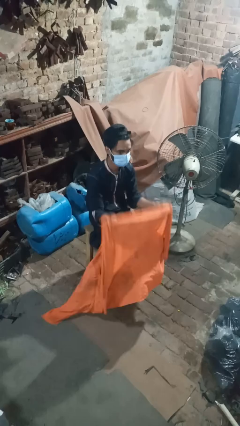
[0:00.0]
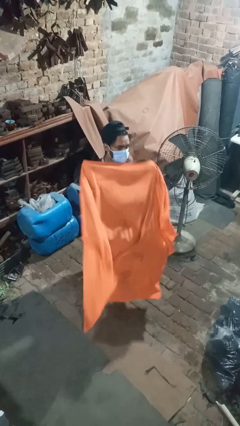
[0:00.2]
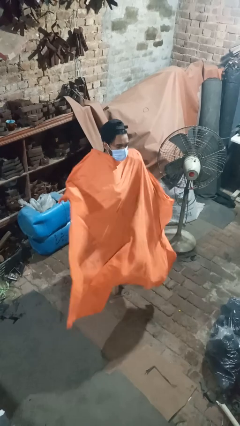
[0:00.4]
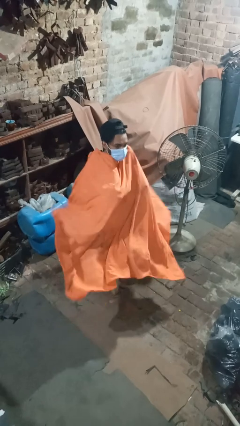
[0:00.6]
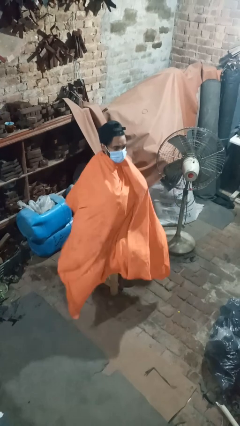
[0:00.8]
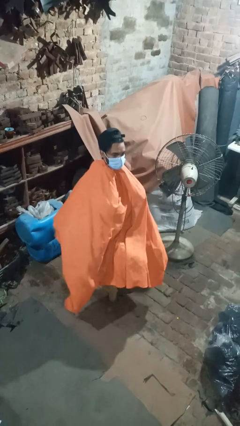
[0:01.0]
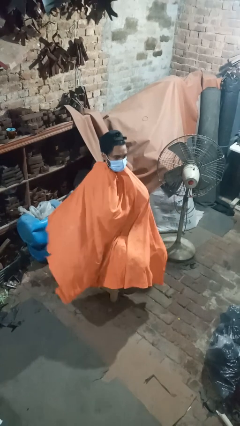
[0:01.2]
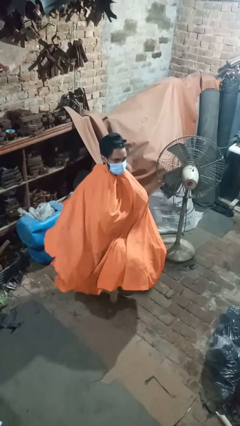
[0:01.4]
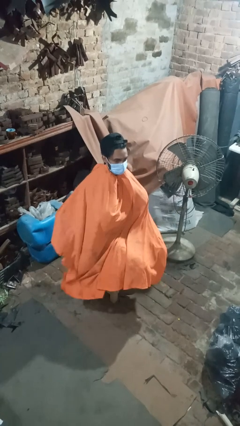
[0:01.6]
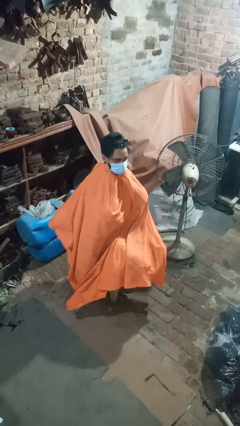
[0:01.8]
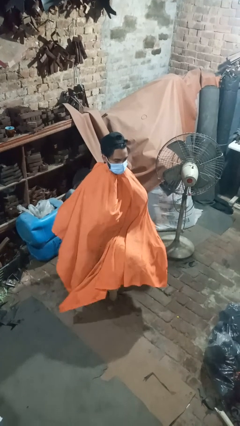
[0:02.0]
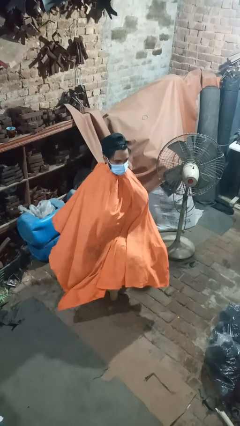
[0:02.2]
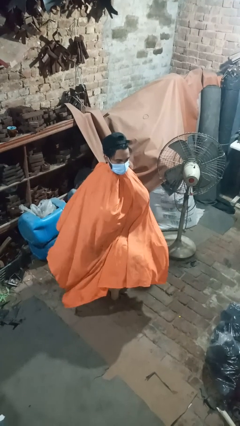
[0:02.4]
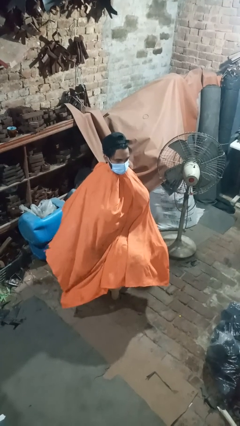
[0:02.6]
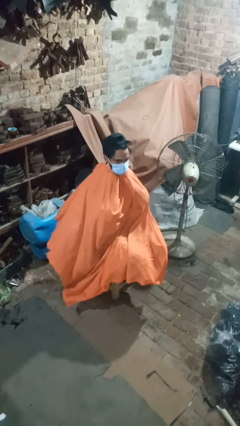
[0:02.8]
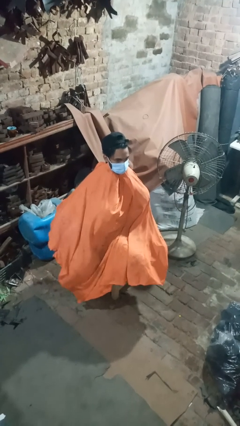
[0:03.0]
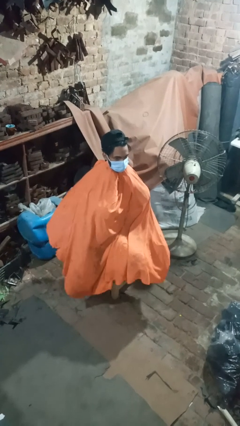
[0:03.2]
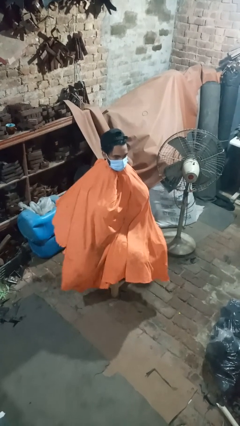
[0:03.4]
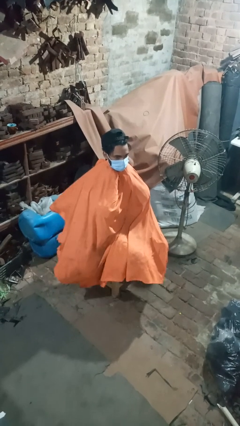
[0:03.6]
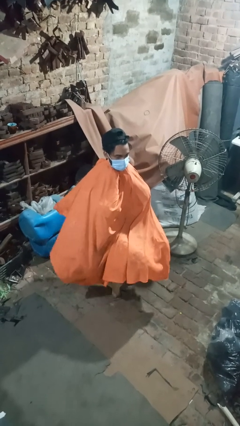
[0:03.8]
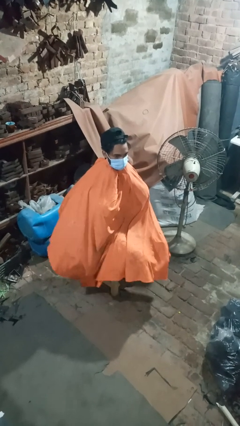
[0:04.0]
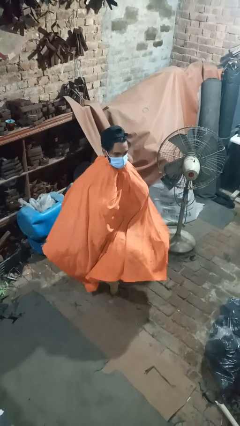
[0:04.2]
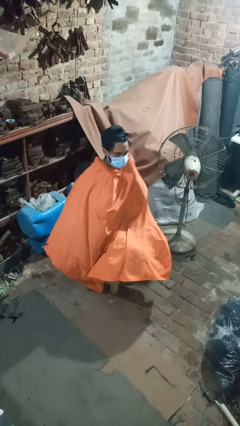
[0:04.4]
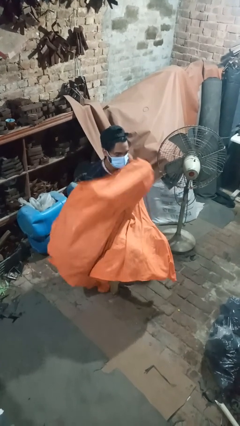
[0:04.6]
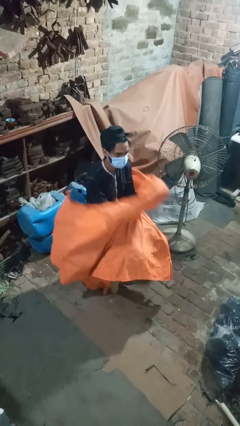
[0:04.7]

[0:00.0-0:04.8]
person covers with blanket

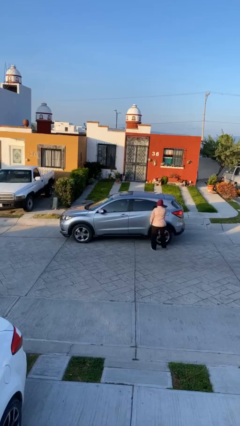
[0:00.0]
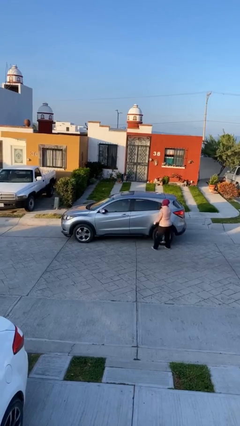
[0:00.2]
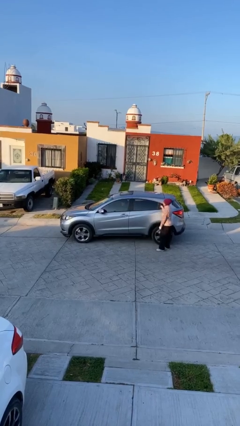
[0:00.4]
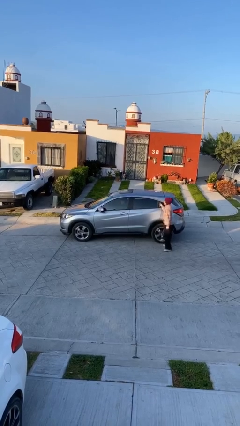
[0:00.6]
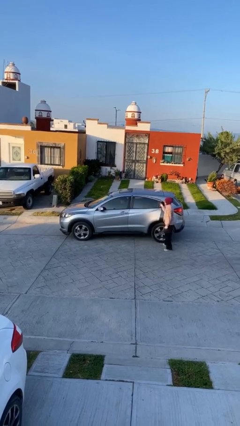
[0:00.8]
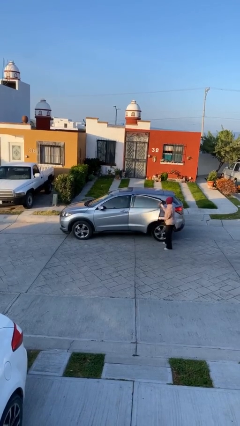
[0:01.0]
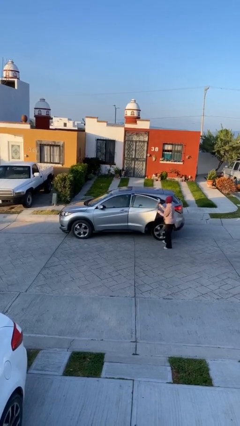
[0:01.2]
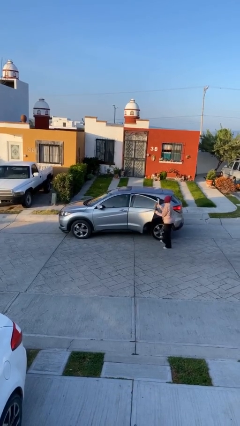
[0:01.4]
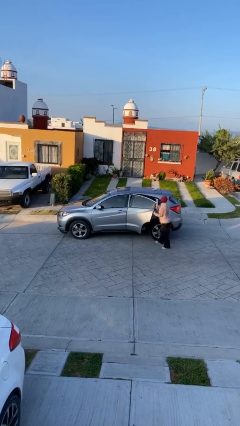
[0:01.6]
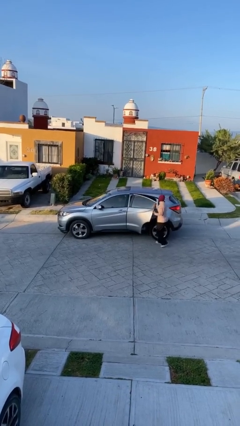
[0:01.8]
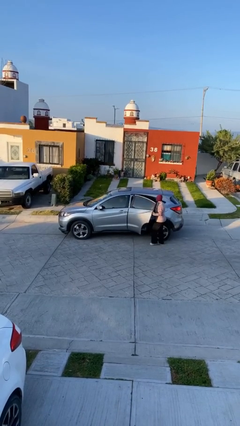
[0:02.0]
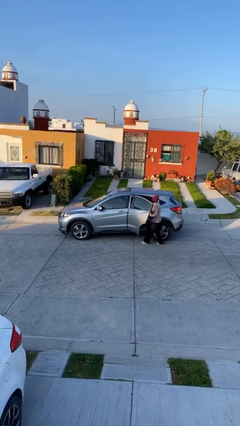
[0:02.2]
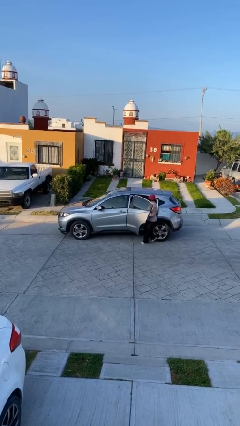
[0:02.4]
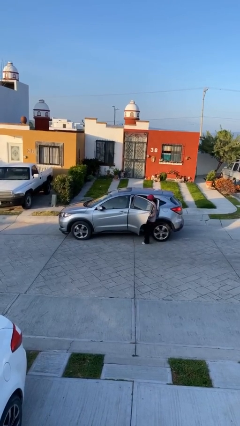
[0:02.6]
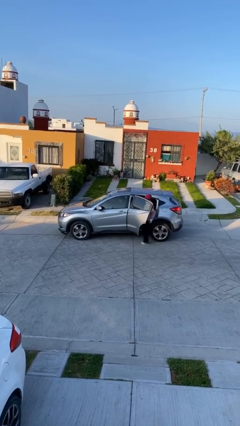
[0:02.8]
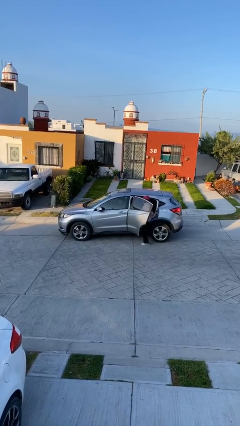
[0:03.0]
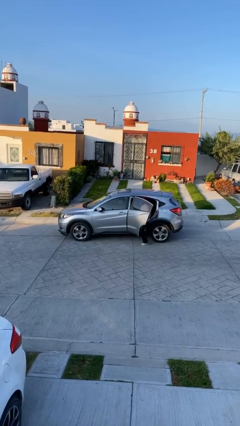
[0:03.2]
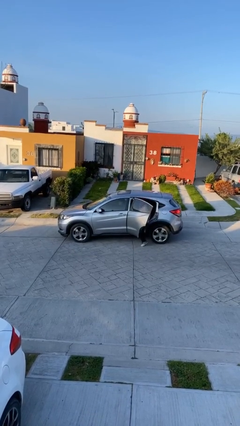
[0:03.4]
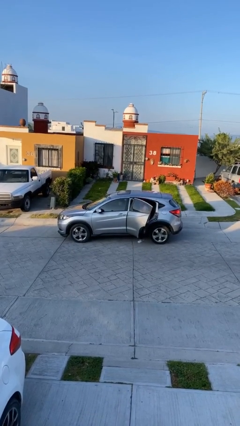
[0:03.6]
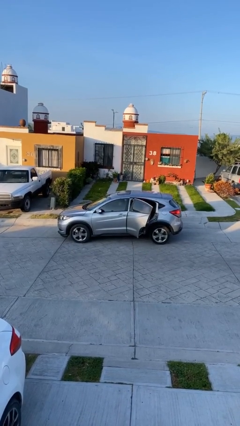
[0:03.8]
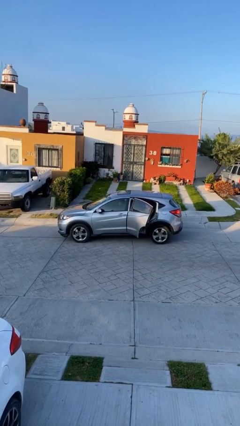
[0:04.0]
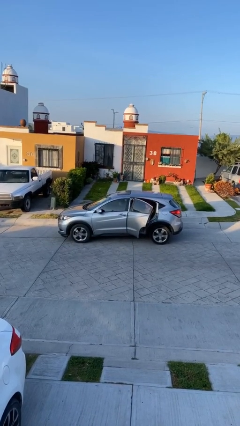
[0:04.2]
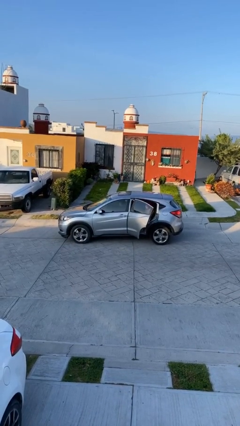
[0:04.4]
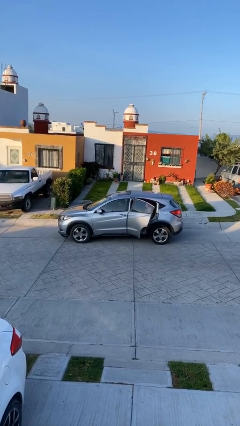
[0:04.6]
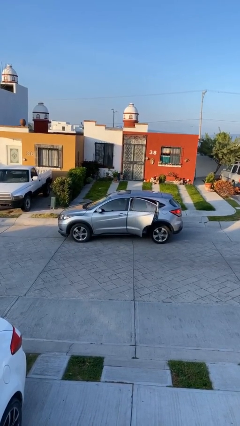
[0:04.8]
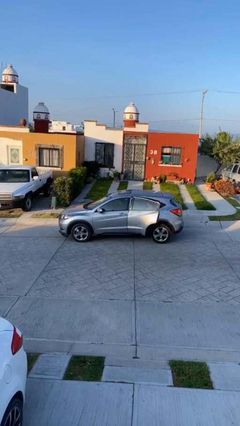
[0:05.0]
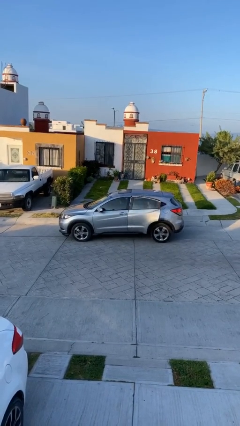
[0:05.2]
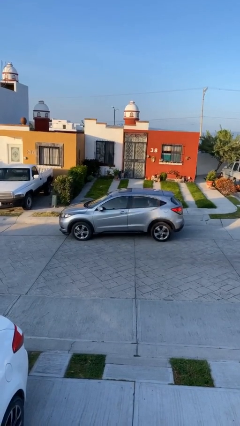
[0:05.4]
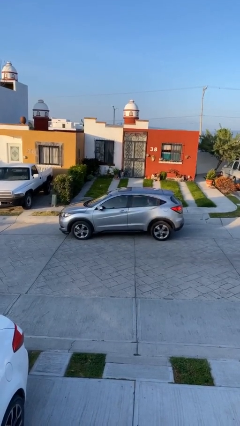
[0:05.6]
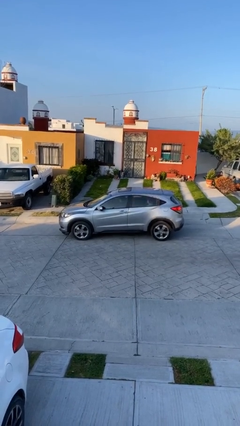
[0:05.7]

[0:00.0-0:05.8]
car picks up person

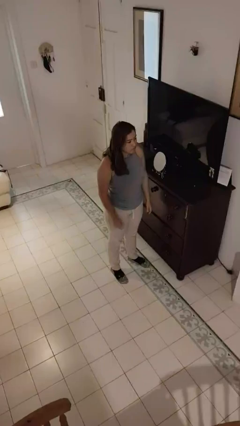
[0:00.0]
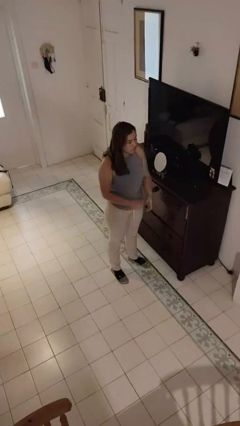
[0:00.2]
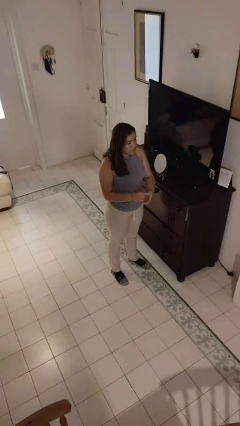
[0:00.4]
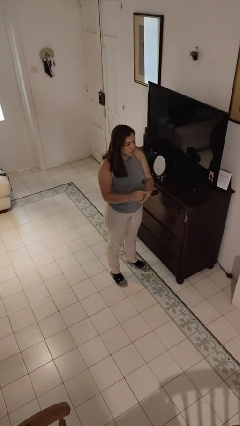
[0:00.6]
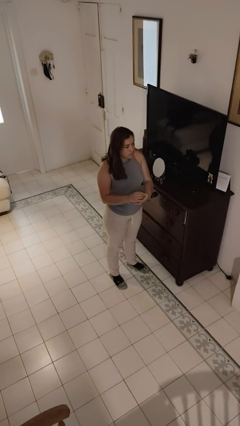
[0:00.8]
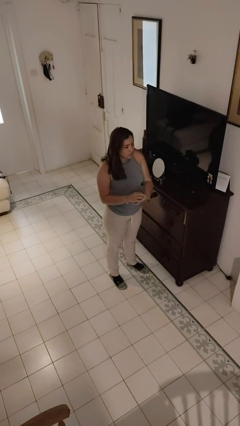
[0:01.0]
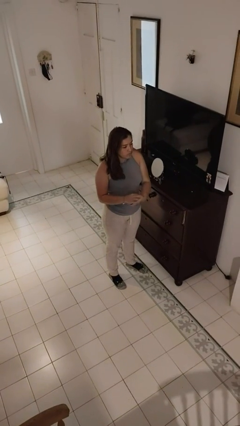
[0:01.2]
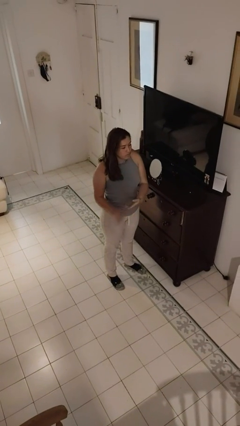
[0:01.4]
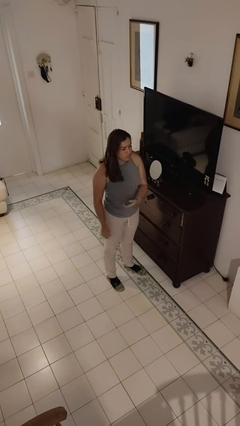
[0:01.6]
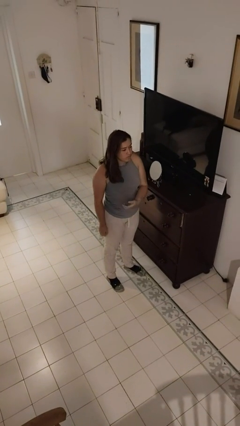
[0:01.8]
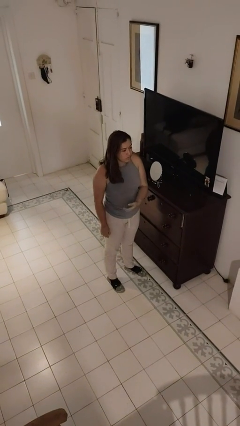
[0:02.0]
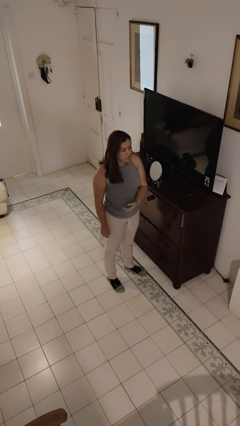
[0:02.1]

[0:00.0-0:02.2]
person puts on ring

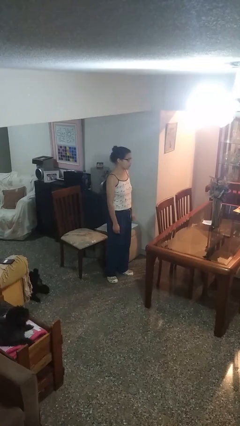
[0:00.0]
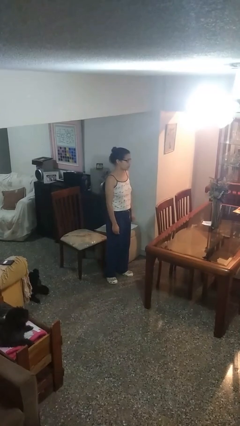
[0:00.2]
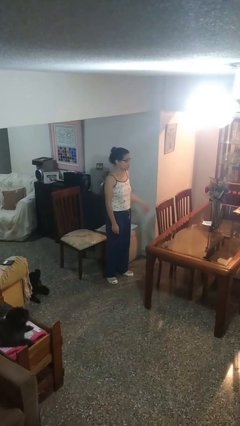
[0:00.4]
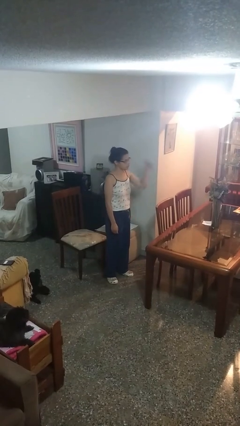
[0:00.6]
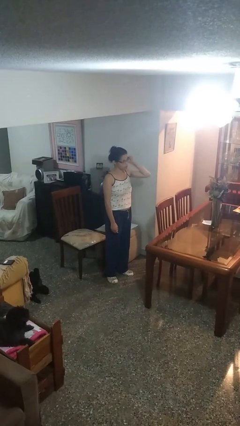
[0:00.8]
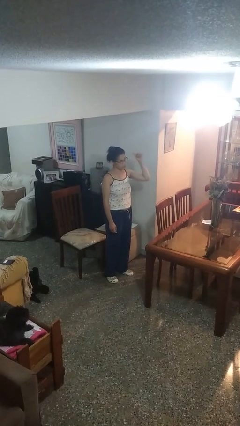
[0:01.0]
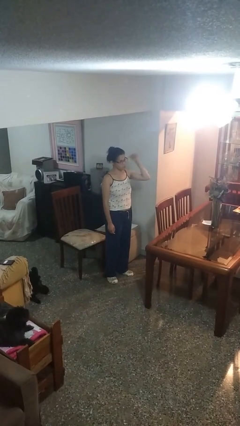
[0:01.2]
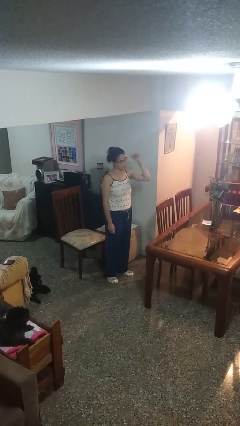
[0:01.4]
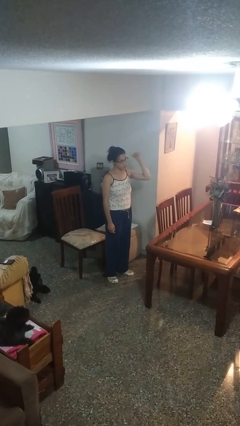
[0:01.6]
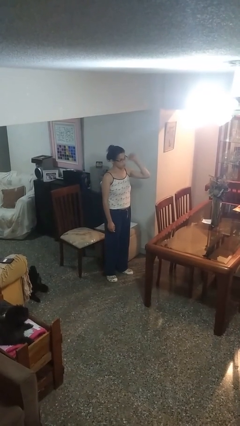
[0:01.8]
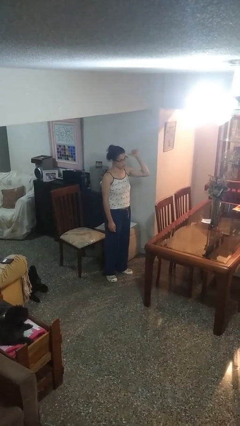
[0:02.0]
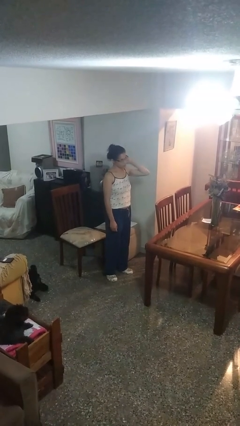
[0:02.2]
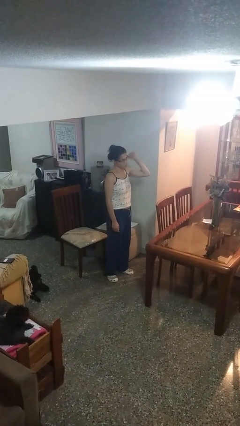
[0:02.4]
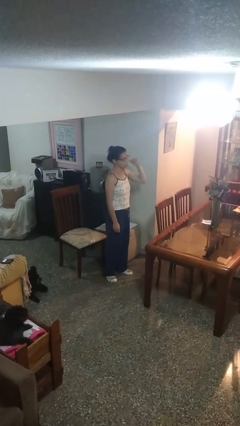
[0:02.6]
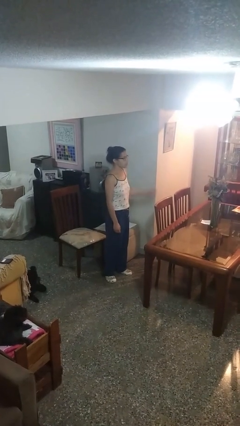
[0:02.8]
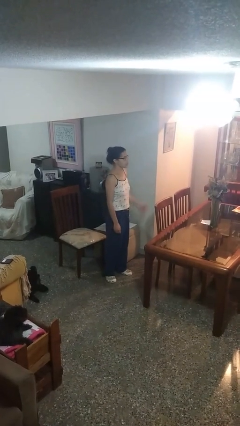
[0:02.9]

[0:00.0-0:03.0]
person gestures behind me

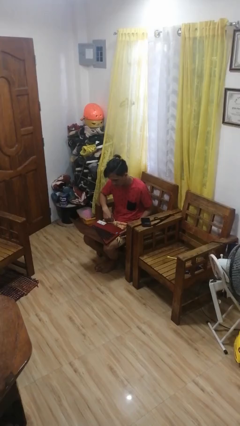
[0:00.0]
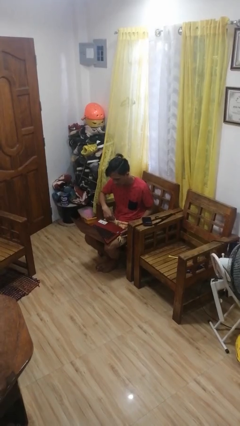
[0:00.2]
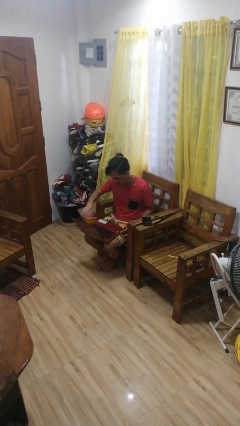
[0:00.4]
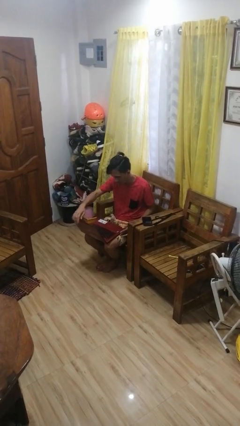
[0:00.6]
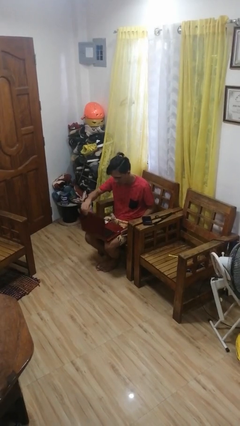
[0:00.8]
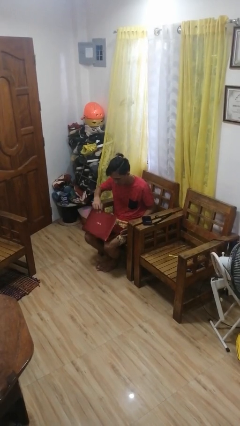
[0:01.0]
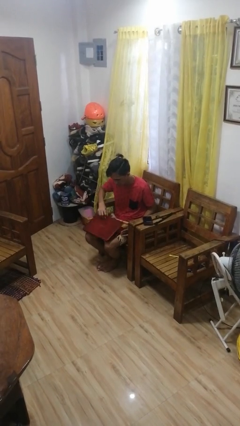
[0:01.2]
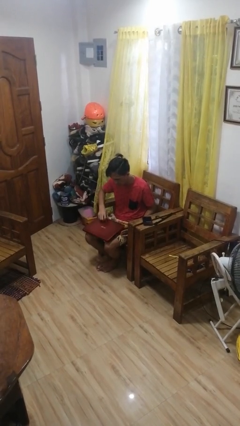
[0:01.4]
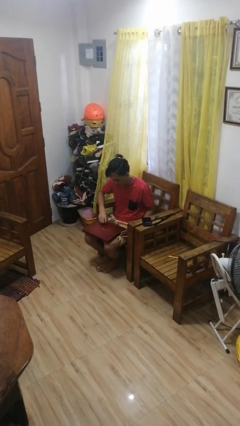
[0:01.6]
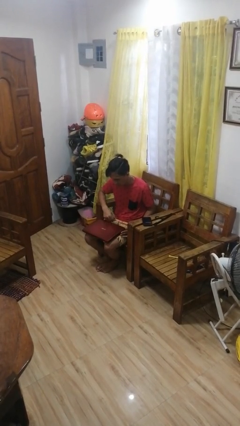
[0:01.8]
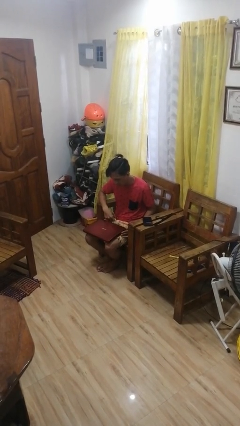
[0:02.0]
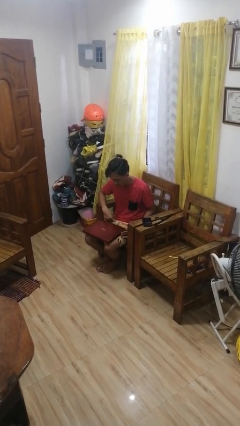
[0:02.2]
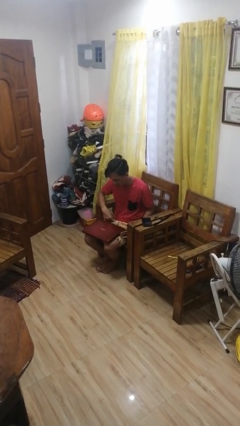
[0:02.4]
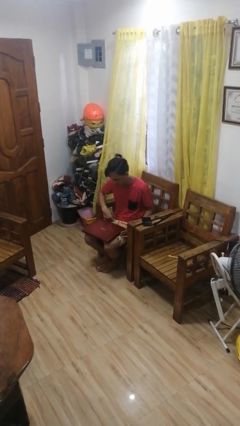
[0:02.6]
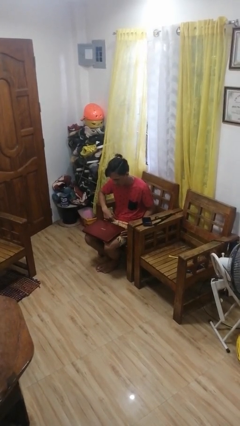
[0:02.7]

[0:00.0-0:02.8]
person closes laptop
